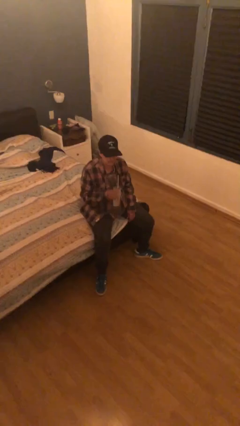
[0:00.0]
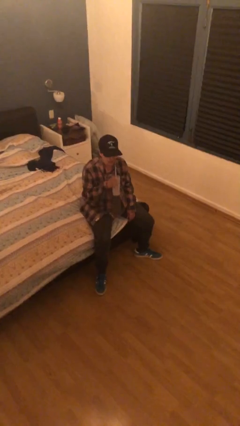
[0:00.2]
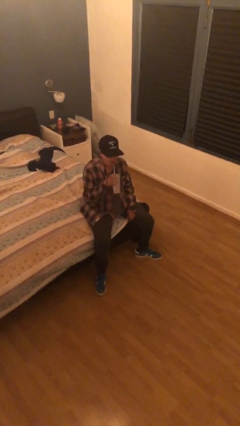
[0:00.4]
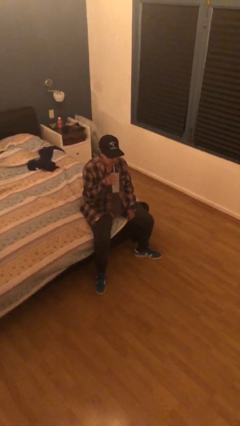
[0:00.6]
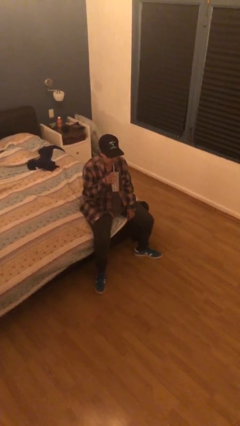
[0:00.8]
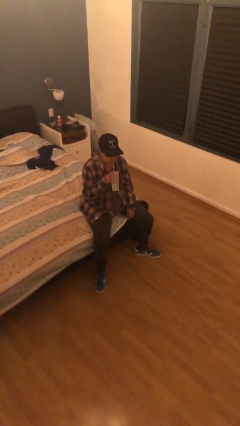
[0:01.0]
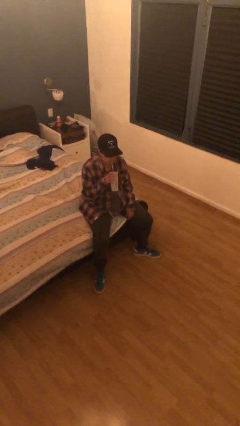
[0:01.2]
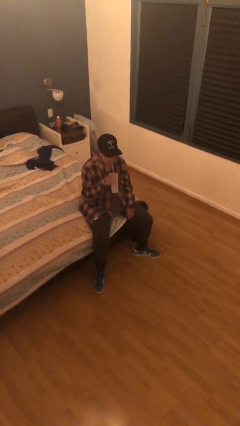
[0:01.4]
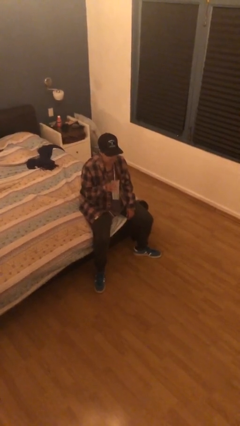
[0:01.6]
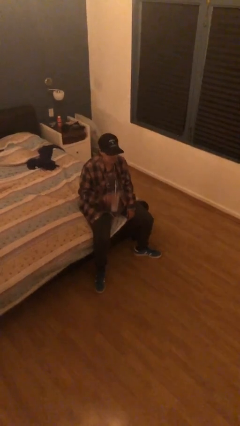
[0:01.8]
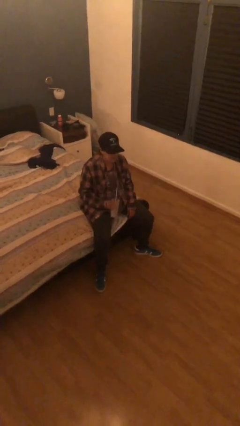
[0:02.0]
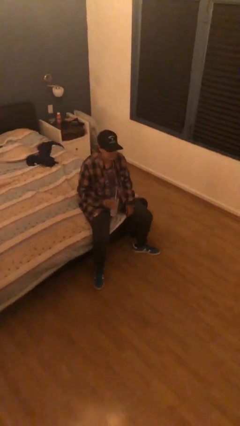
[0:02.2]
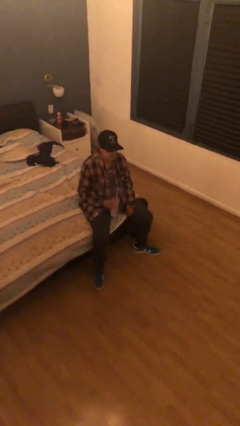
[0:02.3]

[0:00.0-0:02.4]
person drinks from straw

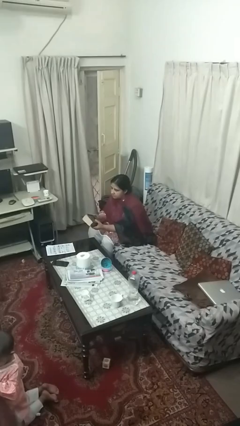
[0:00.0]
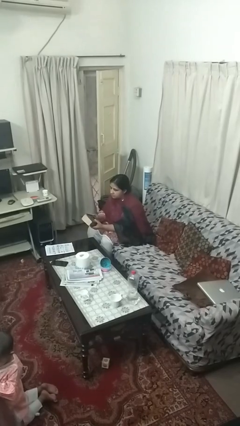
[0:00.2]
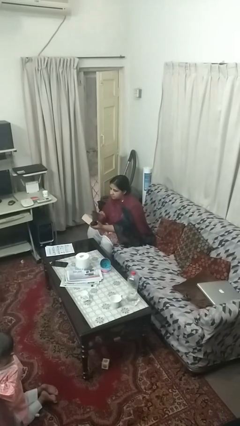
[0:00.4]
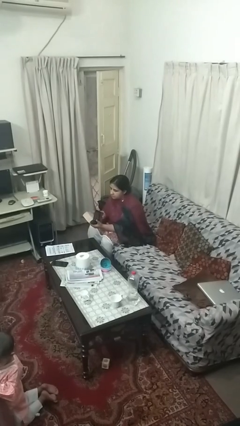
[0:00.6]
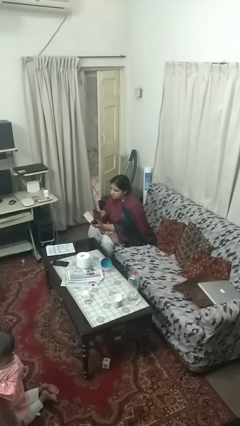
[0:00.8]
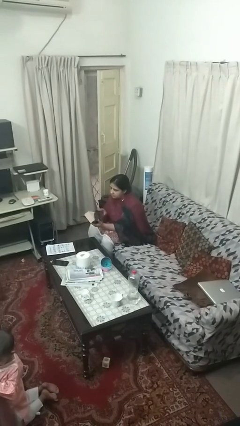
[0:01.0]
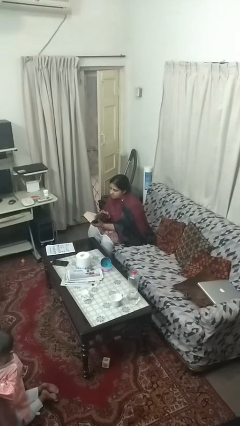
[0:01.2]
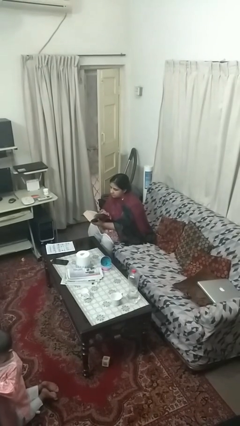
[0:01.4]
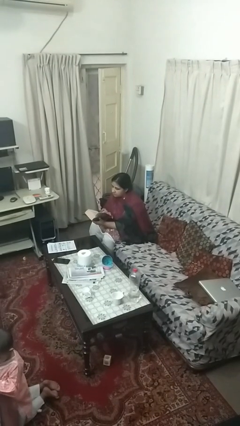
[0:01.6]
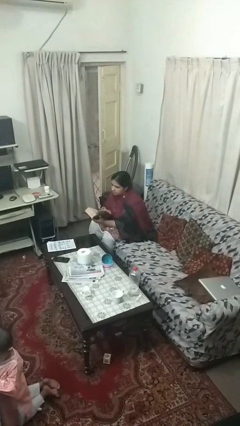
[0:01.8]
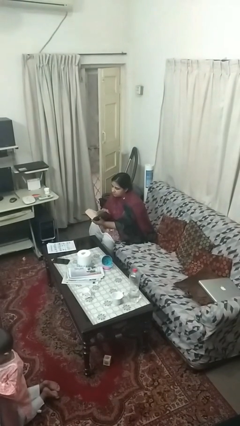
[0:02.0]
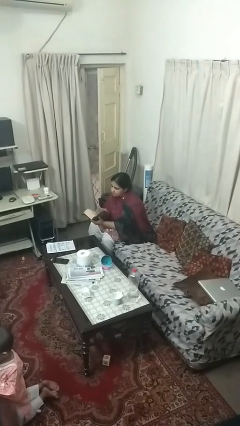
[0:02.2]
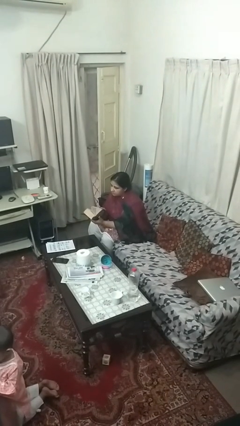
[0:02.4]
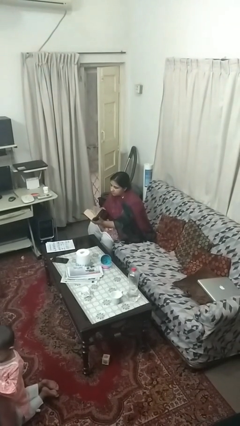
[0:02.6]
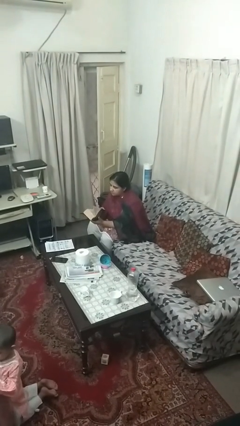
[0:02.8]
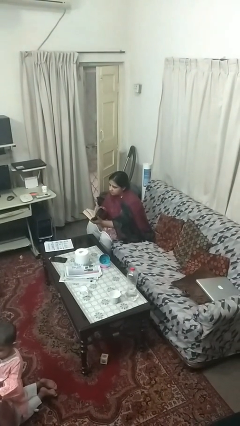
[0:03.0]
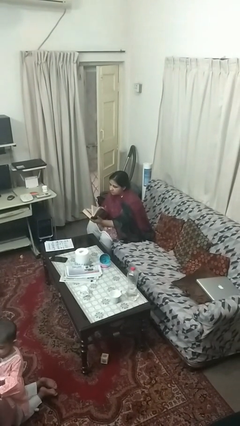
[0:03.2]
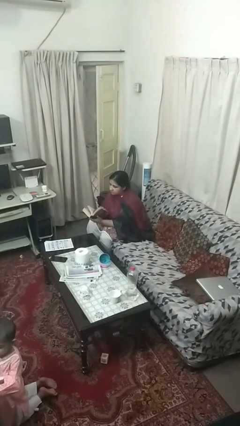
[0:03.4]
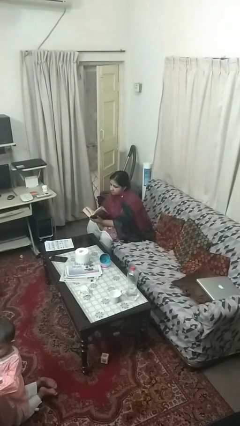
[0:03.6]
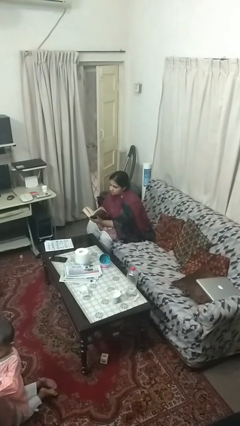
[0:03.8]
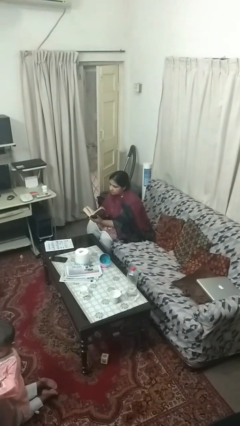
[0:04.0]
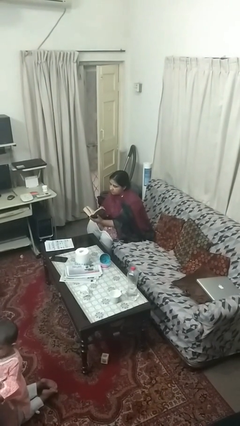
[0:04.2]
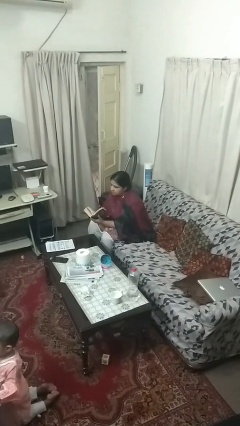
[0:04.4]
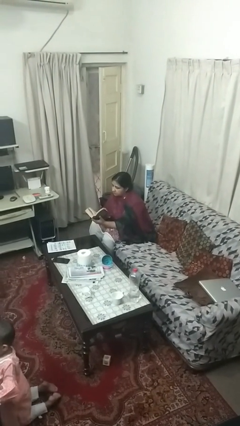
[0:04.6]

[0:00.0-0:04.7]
person reads book

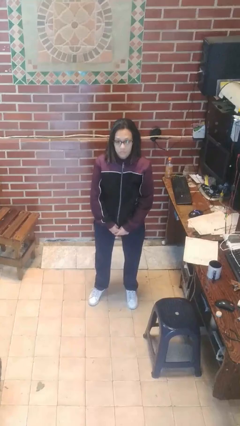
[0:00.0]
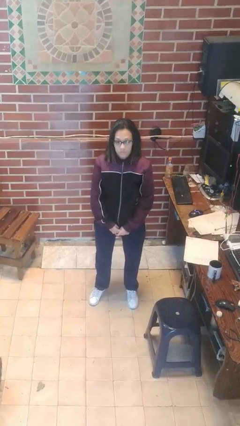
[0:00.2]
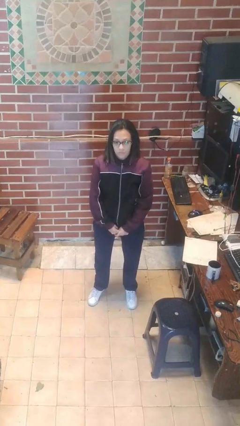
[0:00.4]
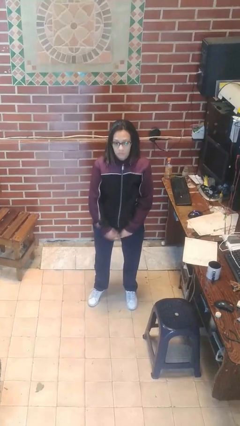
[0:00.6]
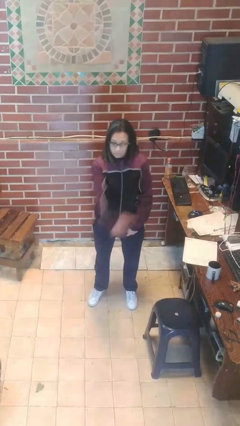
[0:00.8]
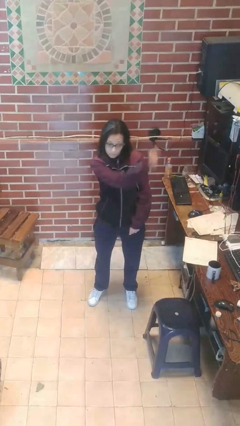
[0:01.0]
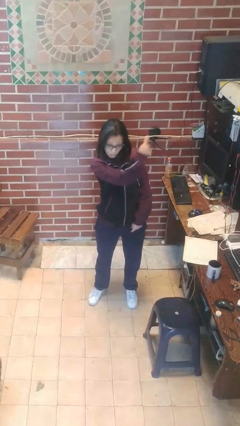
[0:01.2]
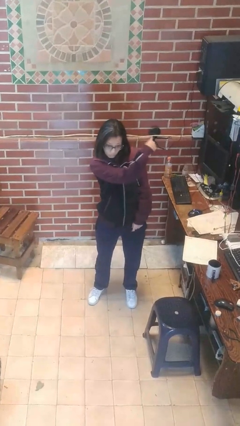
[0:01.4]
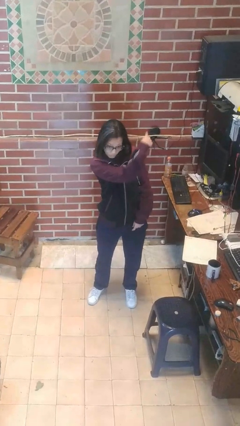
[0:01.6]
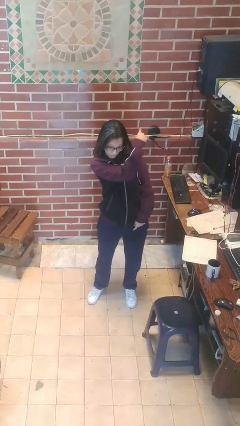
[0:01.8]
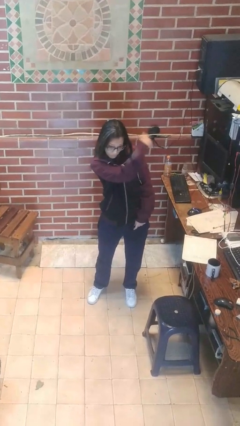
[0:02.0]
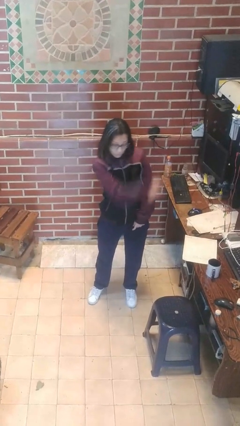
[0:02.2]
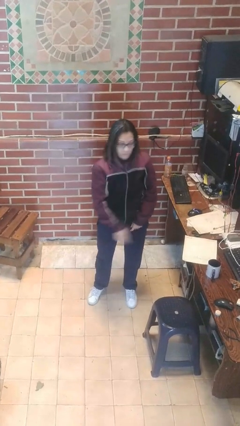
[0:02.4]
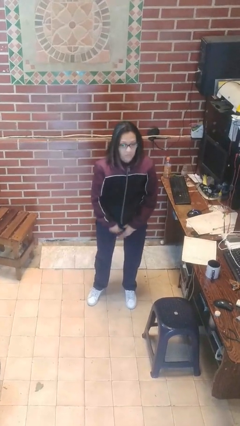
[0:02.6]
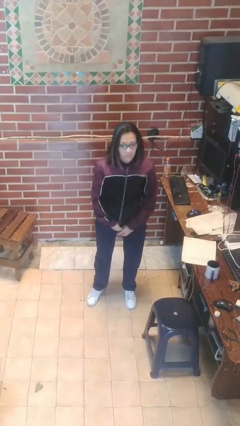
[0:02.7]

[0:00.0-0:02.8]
person gestures behind me

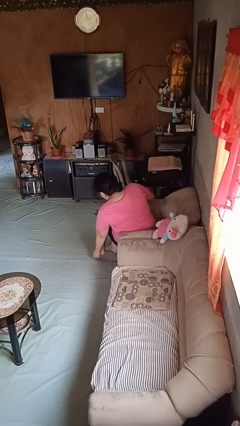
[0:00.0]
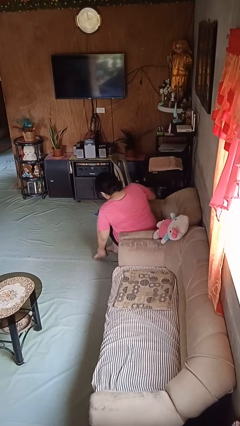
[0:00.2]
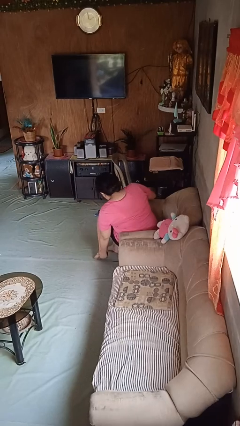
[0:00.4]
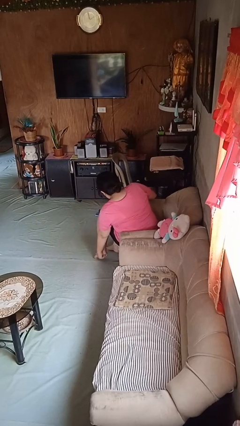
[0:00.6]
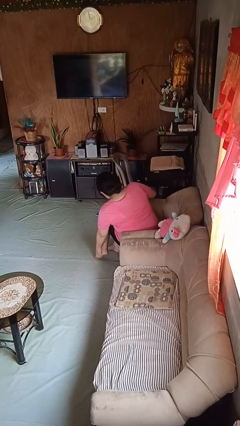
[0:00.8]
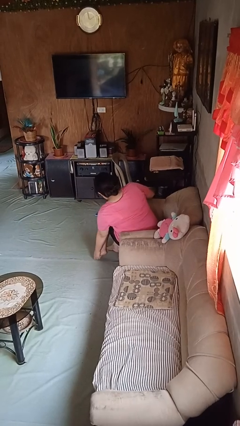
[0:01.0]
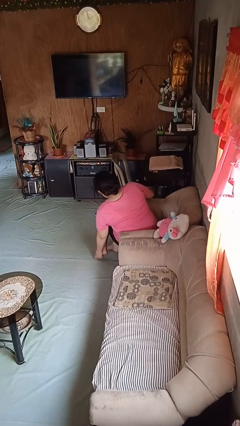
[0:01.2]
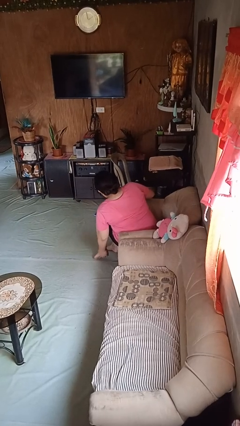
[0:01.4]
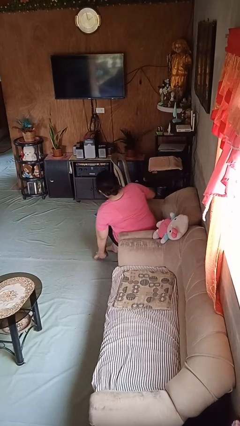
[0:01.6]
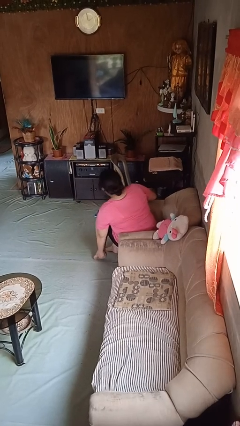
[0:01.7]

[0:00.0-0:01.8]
person rubs foot

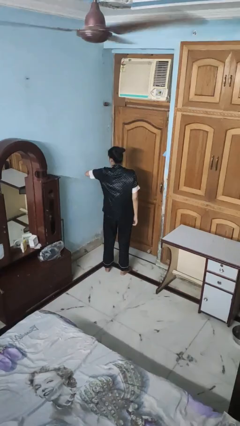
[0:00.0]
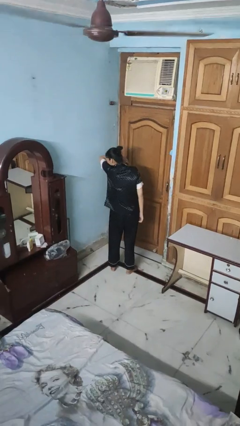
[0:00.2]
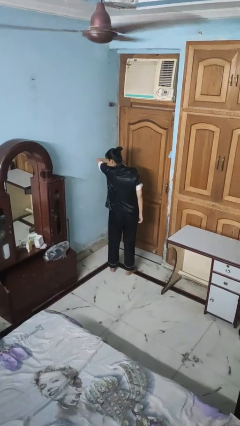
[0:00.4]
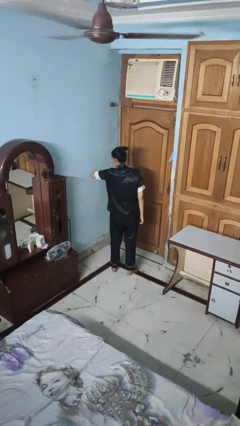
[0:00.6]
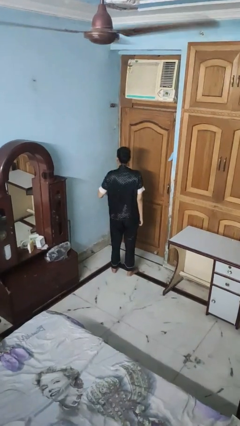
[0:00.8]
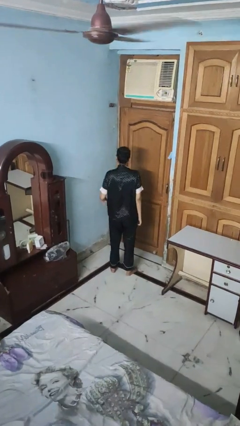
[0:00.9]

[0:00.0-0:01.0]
person sneezes into arm

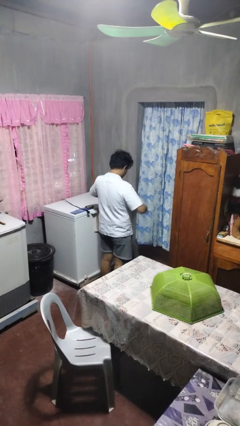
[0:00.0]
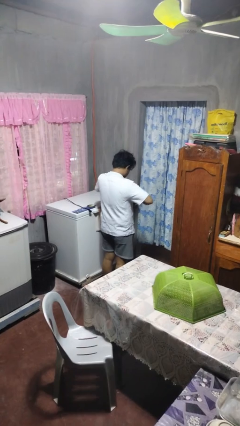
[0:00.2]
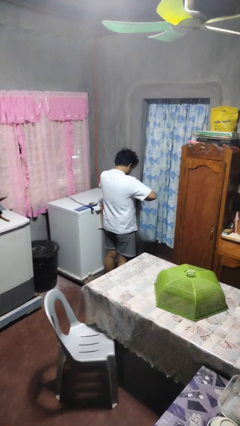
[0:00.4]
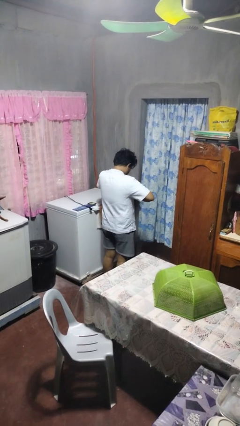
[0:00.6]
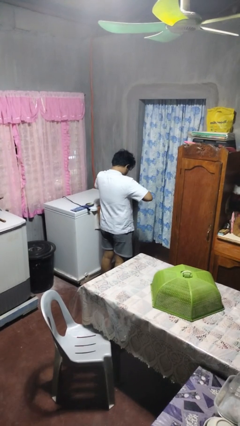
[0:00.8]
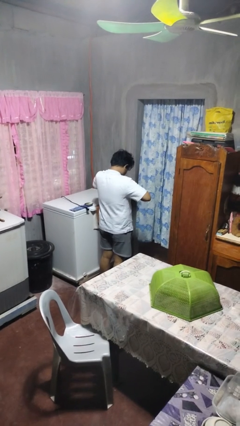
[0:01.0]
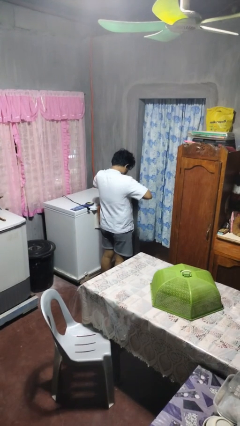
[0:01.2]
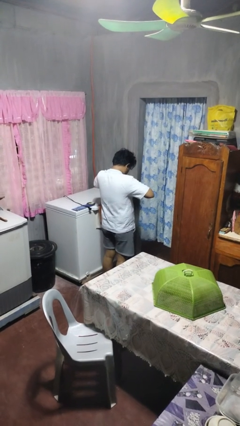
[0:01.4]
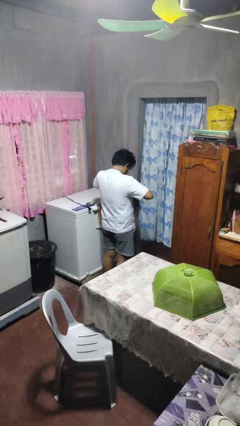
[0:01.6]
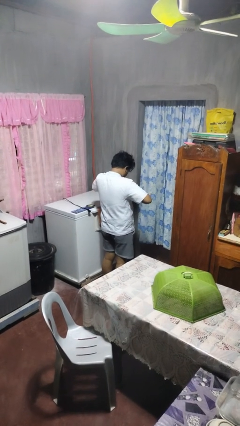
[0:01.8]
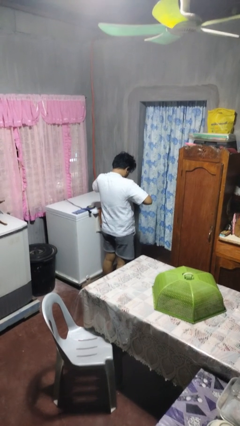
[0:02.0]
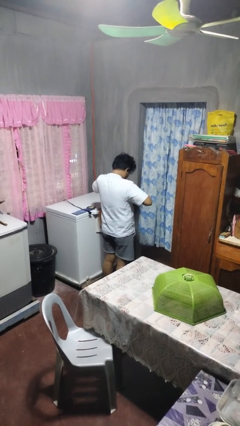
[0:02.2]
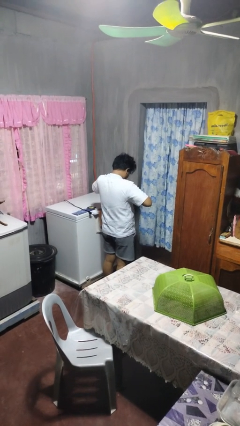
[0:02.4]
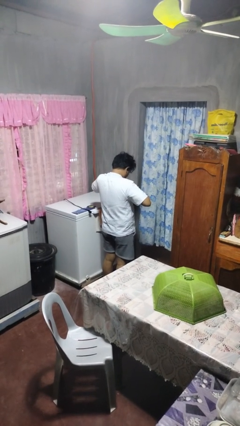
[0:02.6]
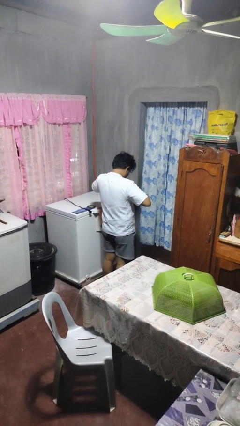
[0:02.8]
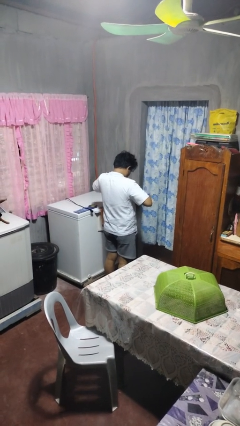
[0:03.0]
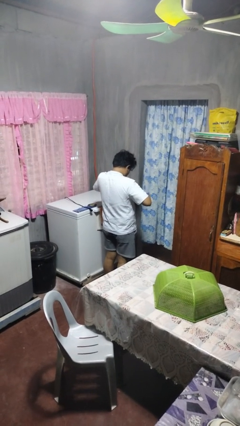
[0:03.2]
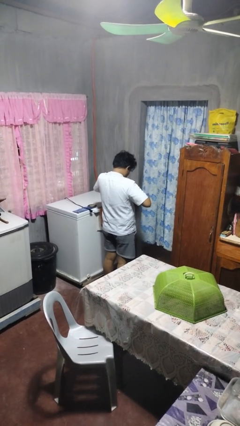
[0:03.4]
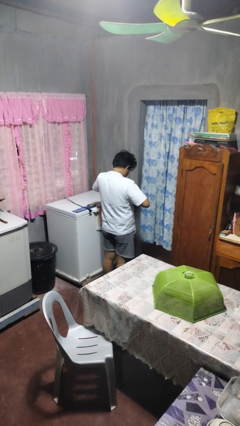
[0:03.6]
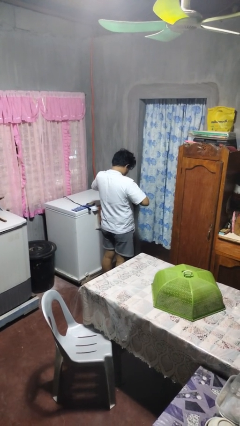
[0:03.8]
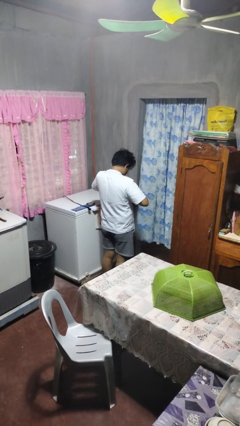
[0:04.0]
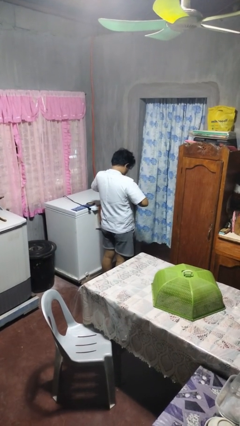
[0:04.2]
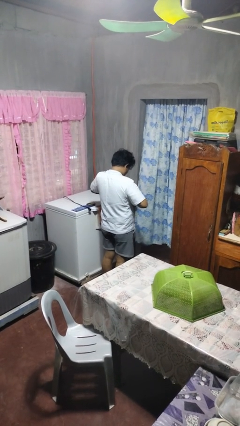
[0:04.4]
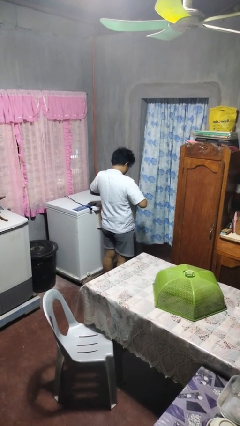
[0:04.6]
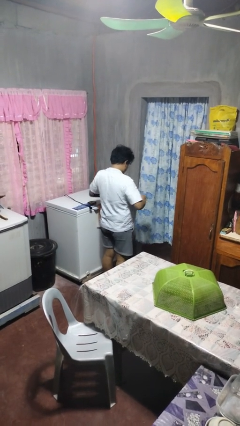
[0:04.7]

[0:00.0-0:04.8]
person unbuttons shirt

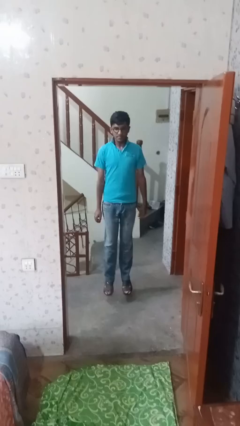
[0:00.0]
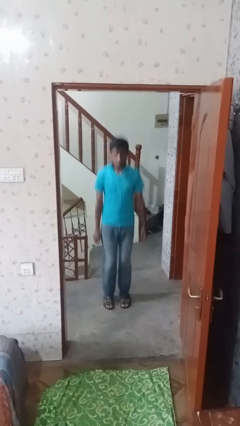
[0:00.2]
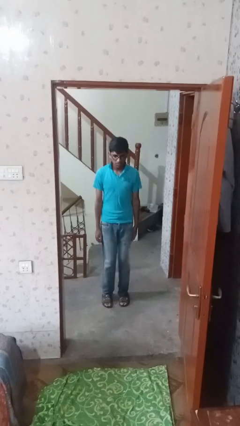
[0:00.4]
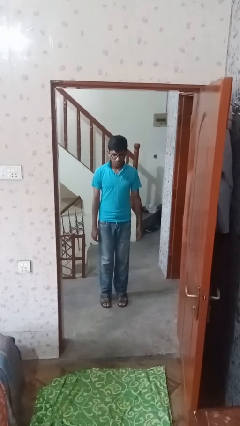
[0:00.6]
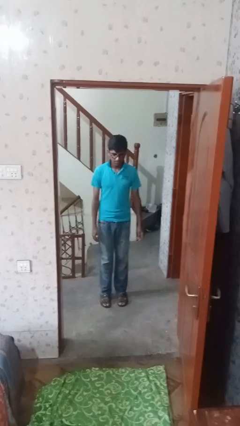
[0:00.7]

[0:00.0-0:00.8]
person jumps
